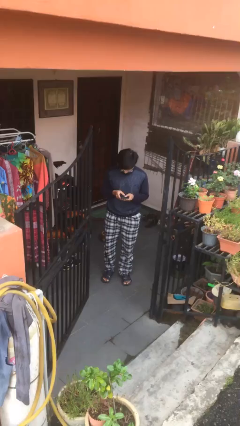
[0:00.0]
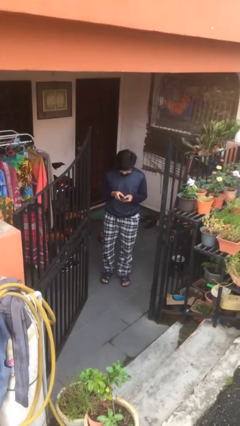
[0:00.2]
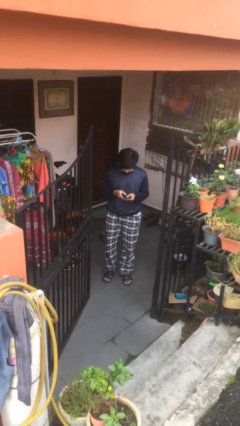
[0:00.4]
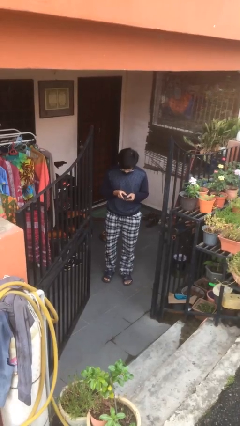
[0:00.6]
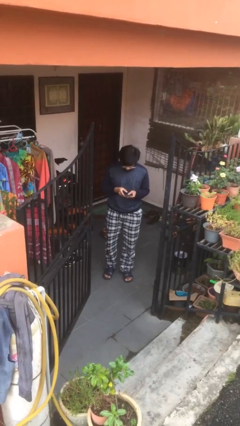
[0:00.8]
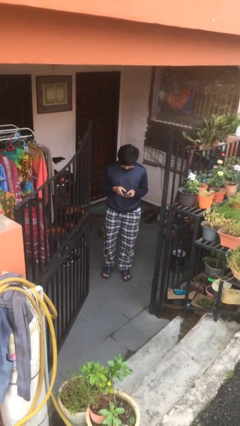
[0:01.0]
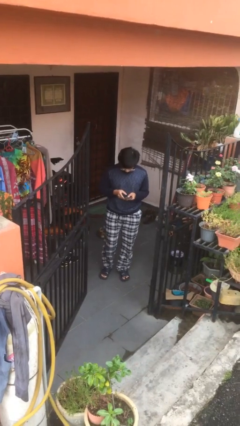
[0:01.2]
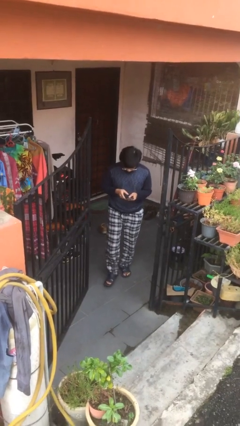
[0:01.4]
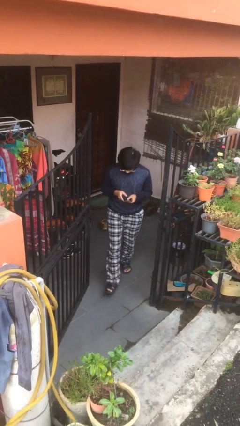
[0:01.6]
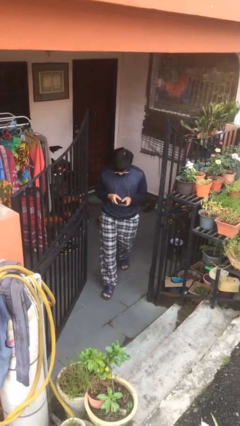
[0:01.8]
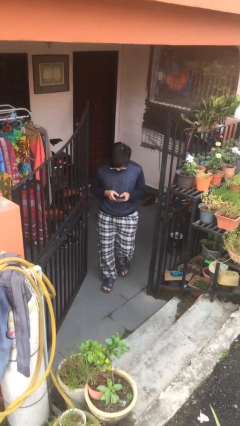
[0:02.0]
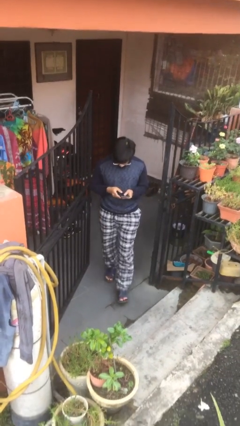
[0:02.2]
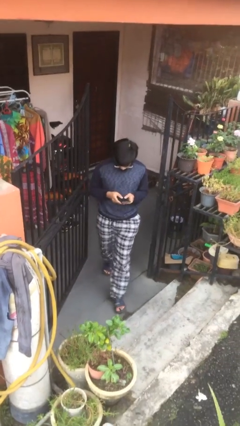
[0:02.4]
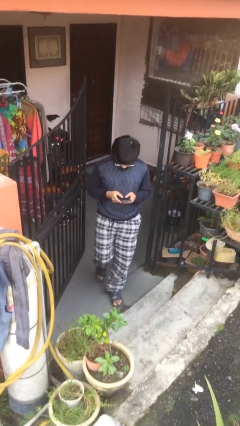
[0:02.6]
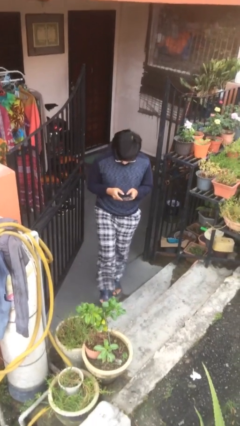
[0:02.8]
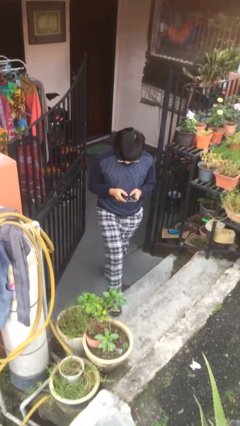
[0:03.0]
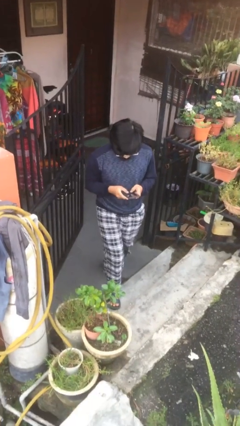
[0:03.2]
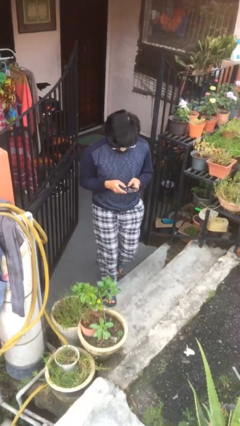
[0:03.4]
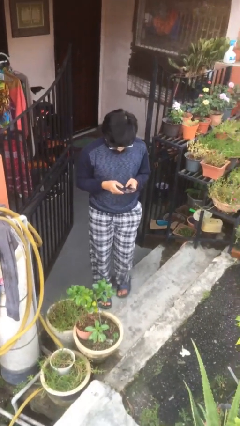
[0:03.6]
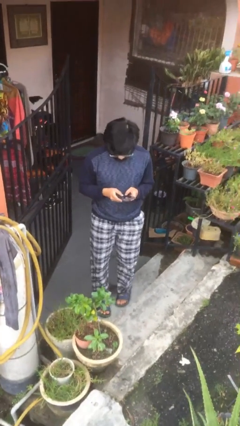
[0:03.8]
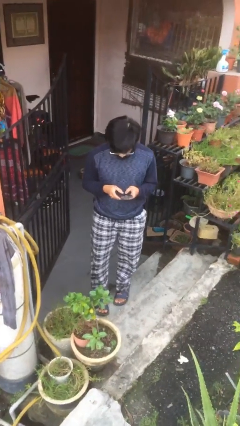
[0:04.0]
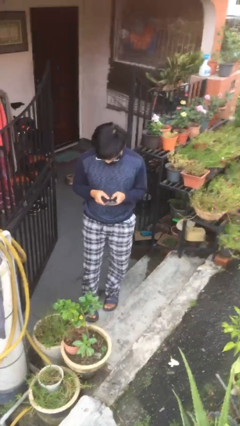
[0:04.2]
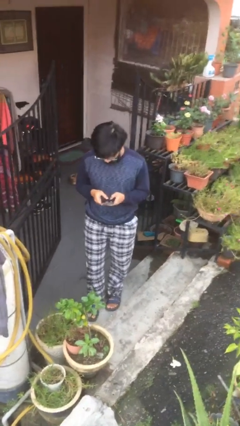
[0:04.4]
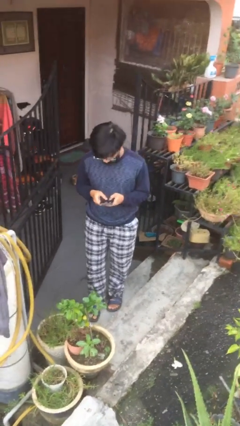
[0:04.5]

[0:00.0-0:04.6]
person enters scene through structure

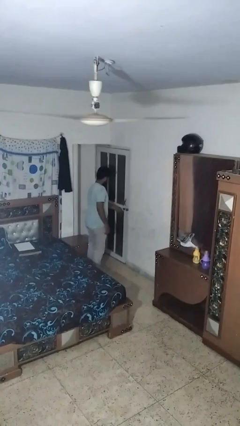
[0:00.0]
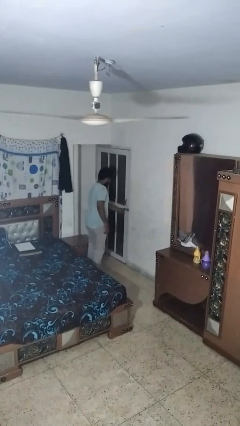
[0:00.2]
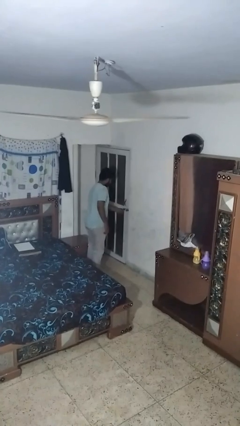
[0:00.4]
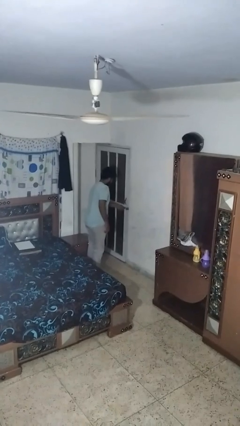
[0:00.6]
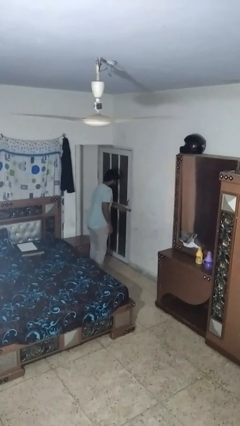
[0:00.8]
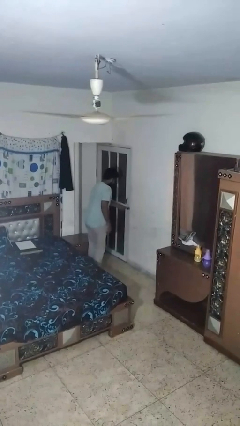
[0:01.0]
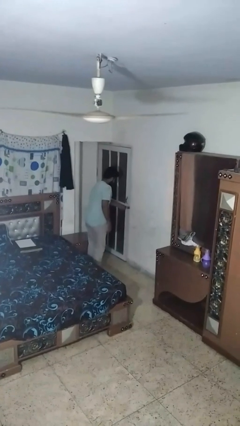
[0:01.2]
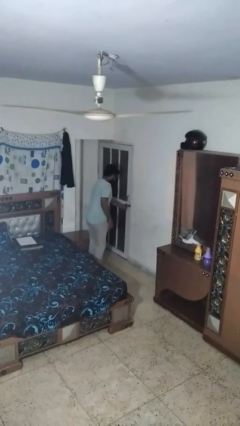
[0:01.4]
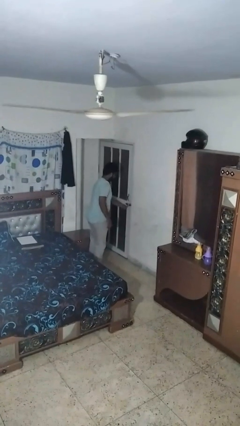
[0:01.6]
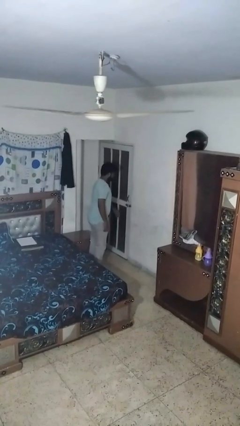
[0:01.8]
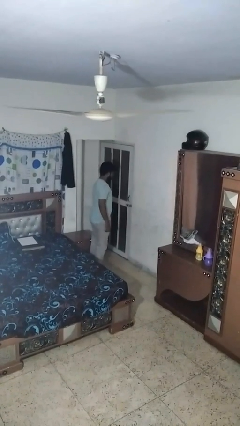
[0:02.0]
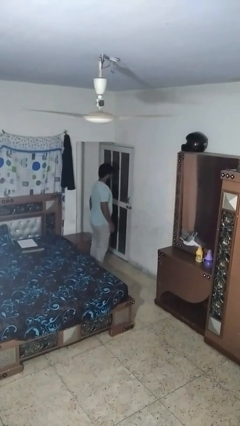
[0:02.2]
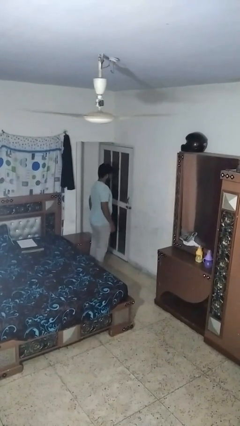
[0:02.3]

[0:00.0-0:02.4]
person locks door with keys

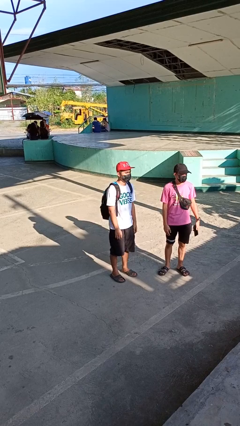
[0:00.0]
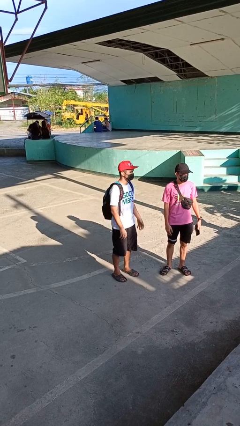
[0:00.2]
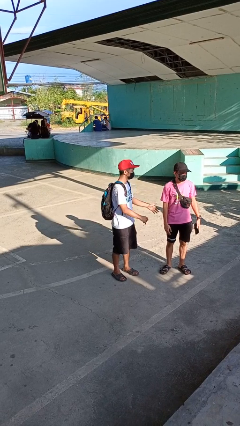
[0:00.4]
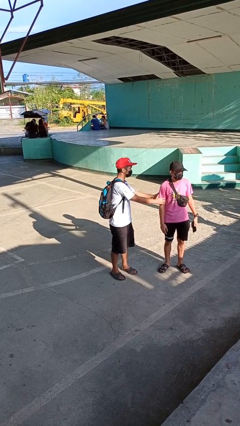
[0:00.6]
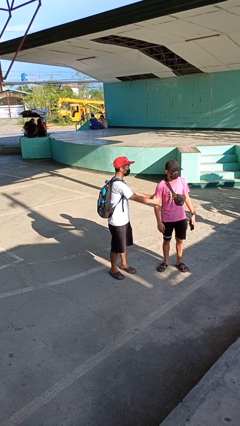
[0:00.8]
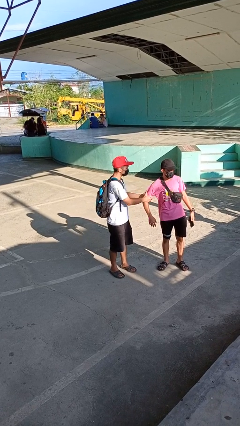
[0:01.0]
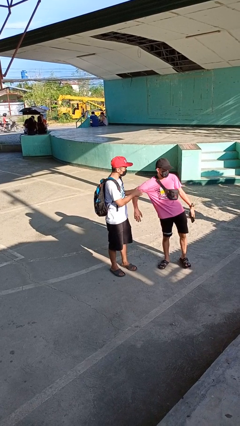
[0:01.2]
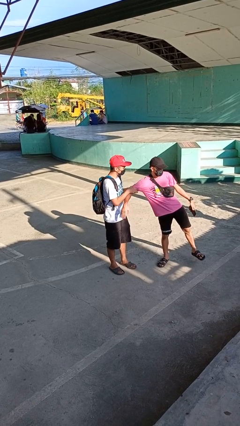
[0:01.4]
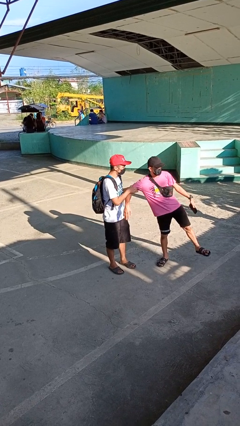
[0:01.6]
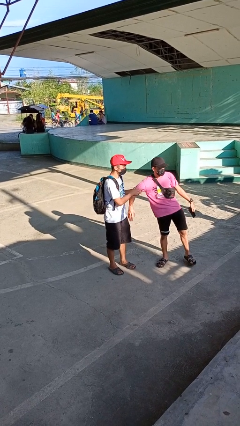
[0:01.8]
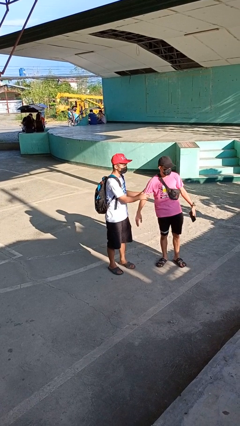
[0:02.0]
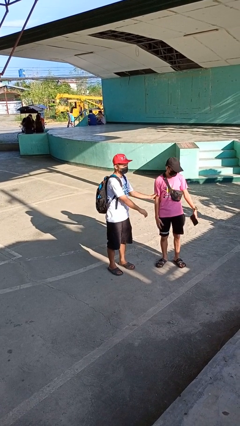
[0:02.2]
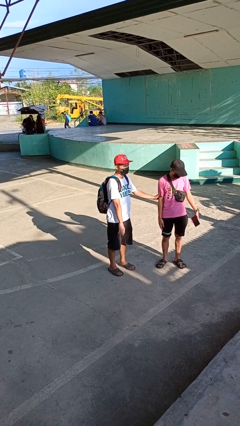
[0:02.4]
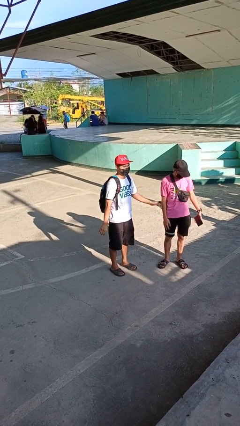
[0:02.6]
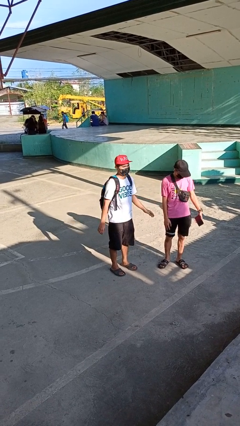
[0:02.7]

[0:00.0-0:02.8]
person grabs person by bicep

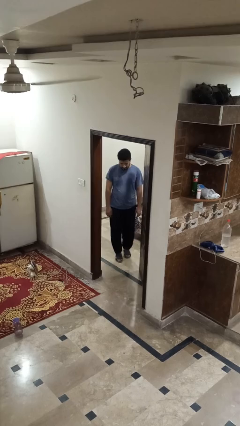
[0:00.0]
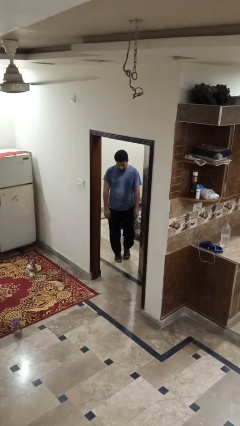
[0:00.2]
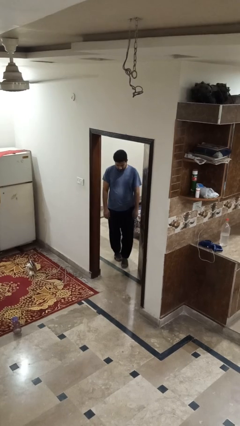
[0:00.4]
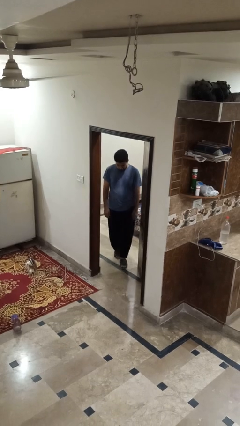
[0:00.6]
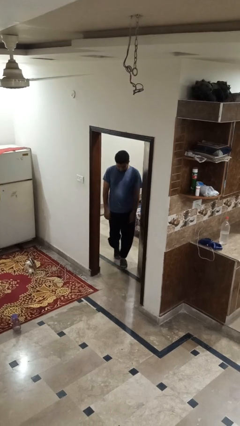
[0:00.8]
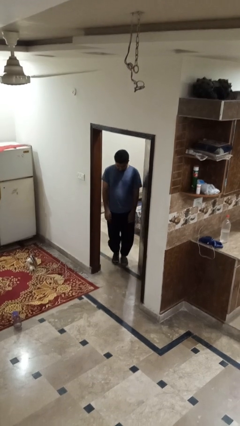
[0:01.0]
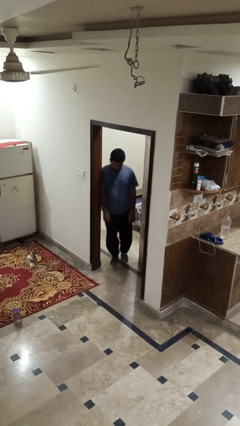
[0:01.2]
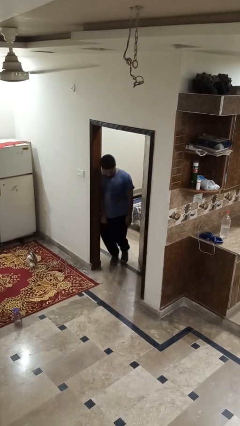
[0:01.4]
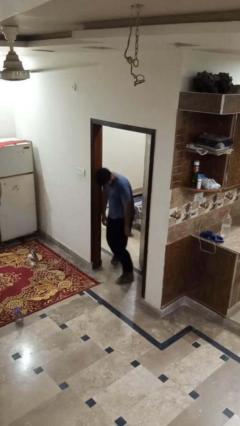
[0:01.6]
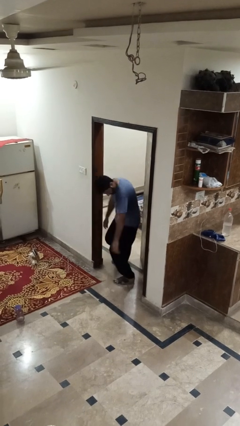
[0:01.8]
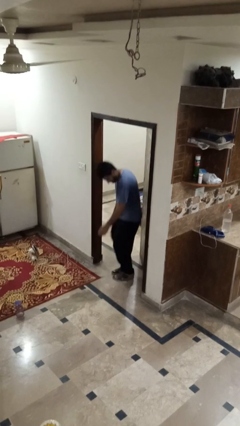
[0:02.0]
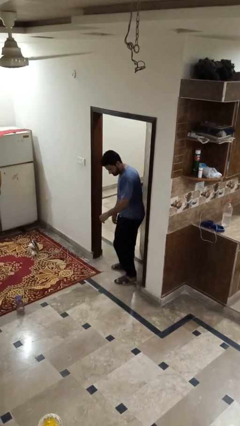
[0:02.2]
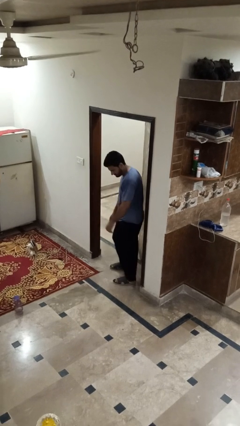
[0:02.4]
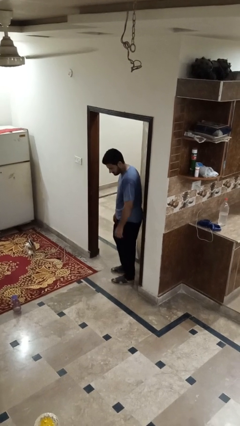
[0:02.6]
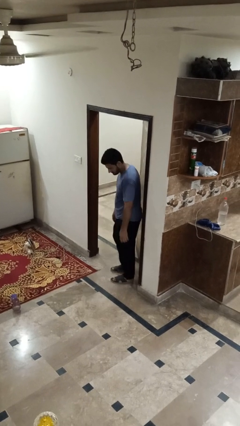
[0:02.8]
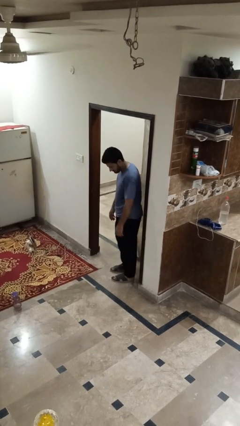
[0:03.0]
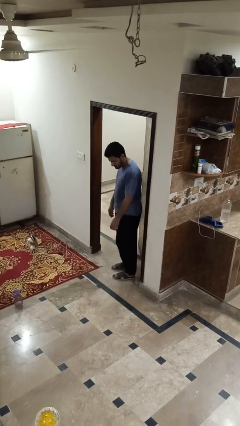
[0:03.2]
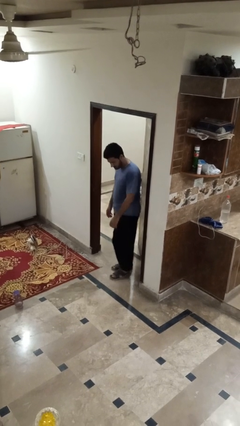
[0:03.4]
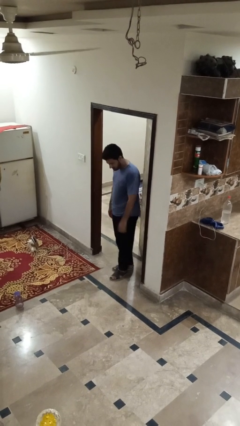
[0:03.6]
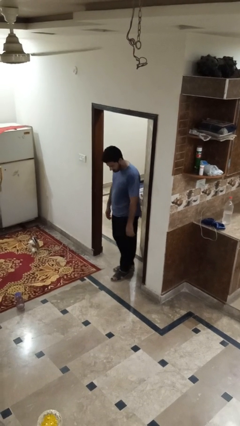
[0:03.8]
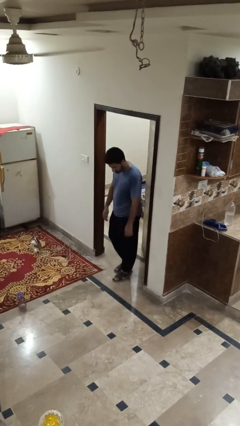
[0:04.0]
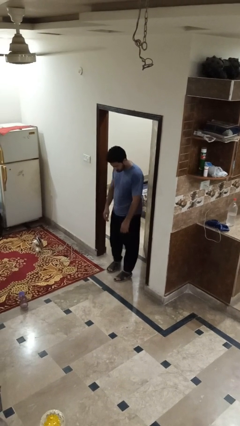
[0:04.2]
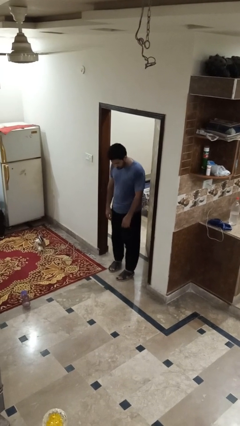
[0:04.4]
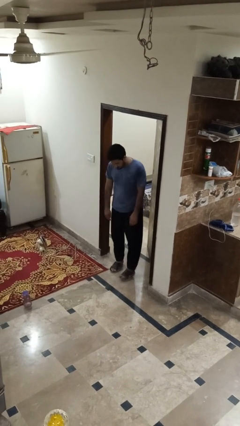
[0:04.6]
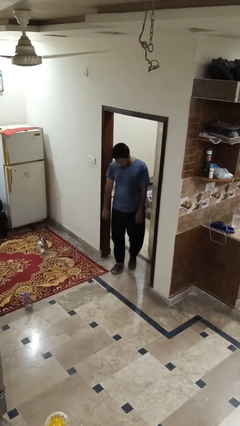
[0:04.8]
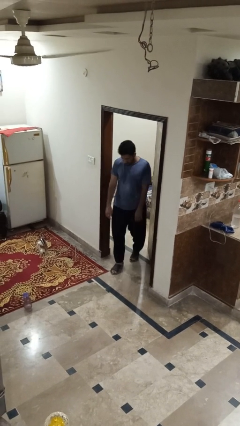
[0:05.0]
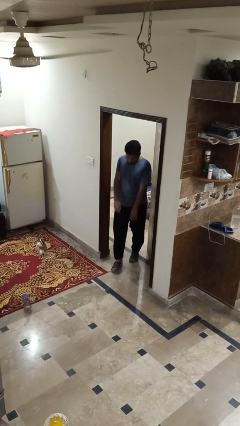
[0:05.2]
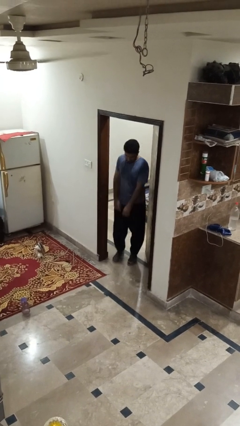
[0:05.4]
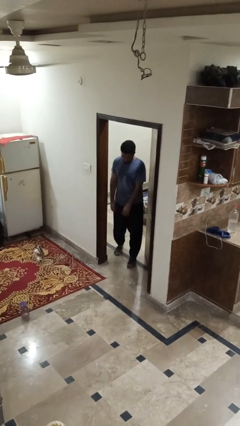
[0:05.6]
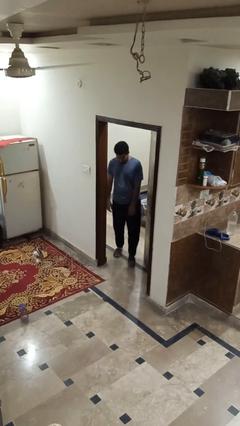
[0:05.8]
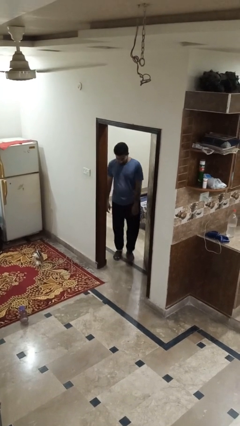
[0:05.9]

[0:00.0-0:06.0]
person bumps into wall

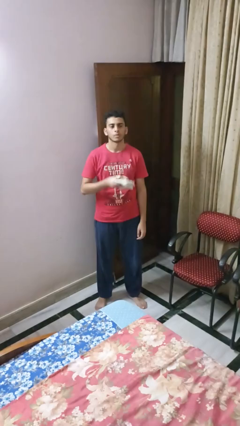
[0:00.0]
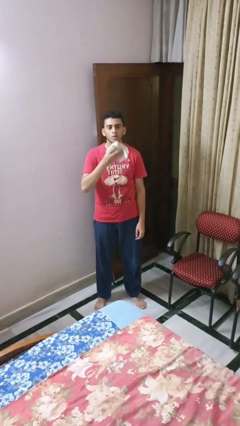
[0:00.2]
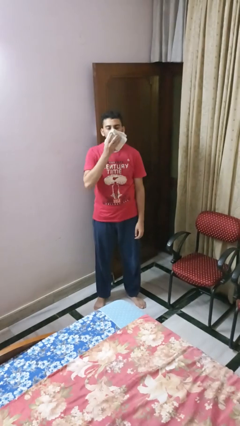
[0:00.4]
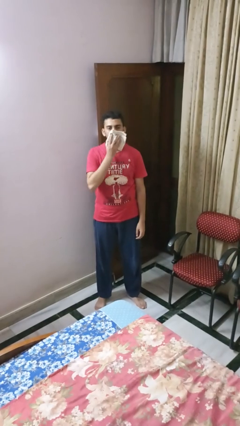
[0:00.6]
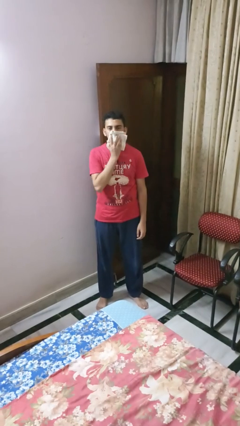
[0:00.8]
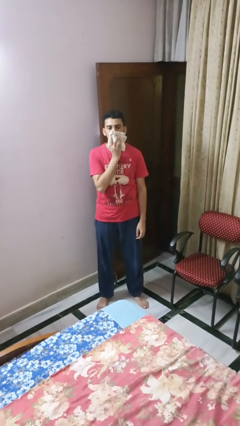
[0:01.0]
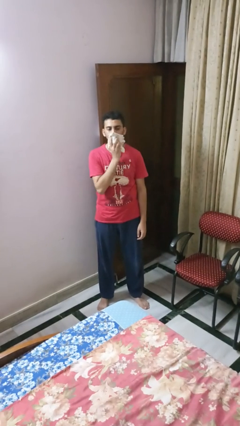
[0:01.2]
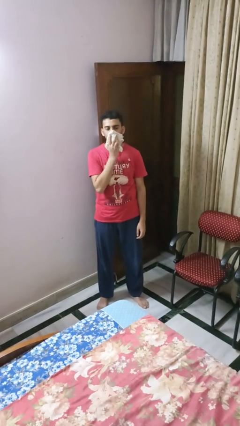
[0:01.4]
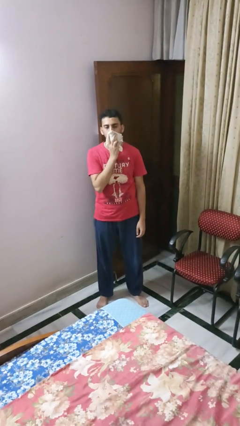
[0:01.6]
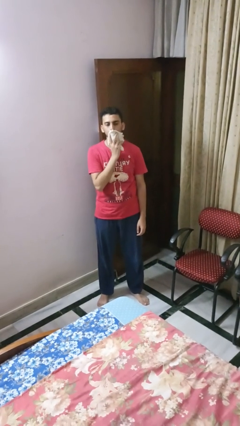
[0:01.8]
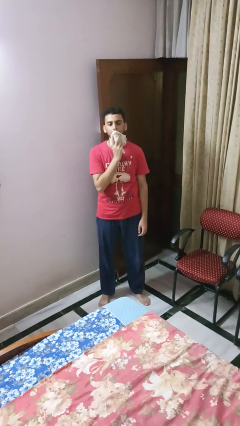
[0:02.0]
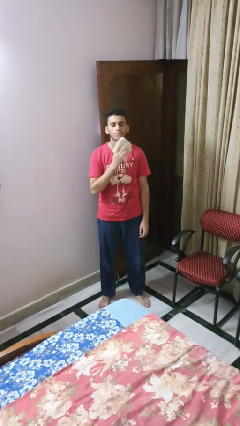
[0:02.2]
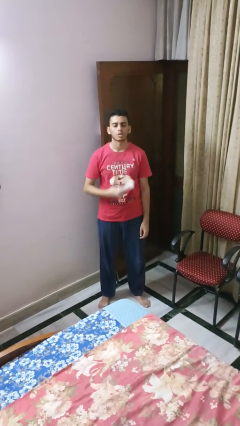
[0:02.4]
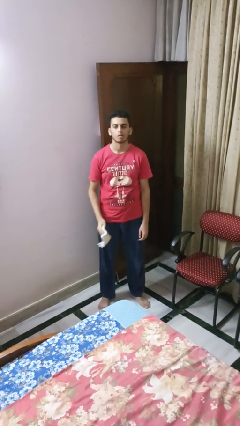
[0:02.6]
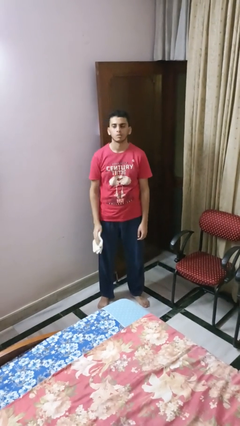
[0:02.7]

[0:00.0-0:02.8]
person wipes mouth with napkin
